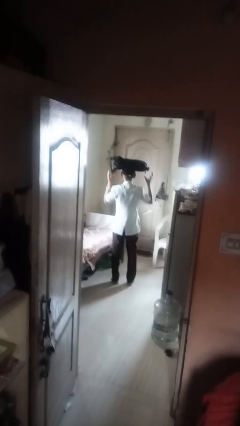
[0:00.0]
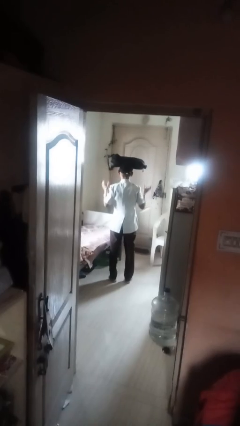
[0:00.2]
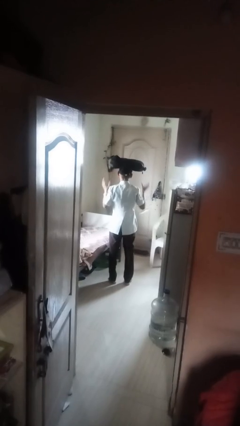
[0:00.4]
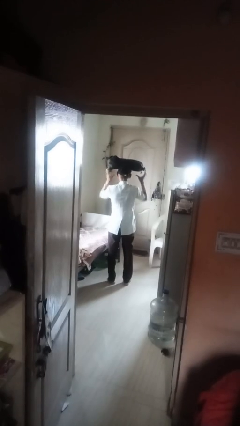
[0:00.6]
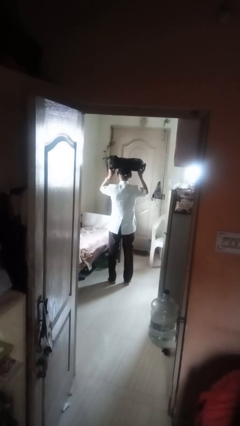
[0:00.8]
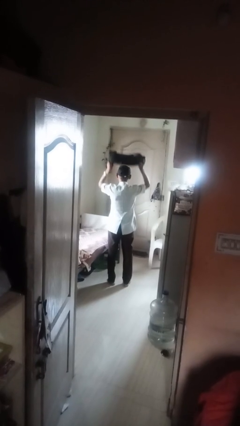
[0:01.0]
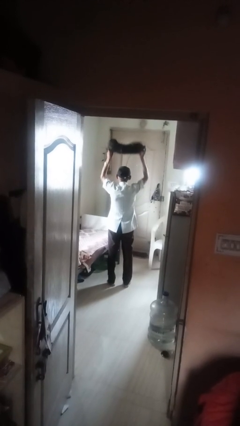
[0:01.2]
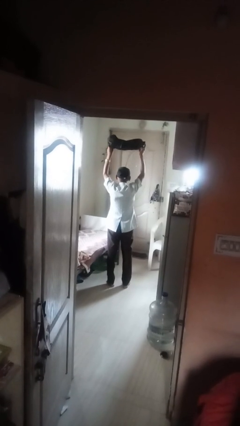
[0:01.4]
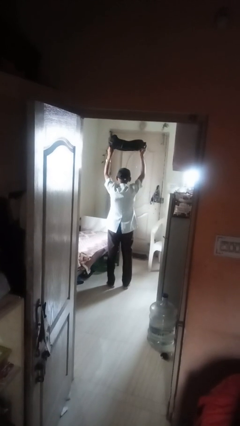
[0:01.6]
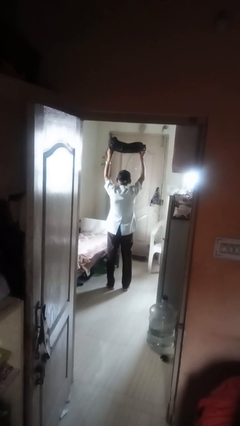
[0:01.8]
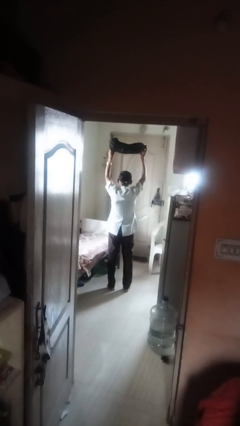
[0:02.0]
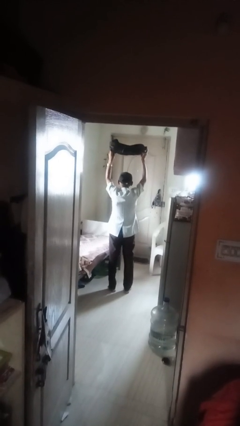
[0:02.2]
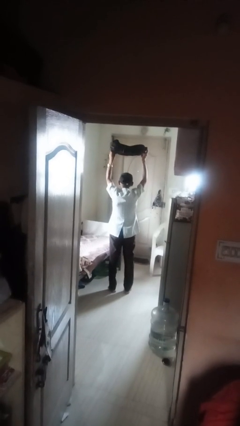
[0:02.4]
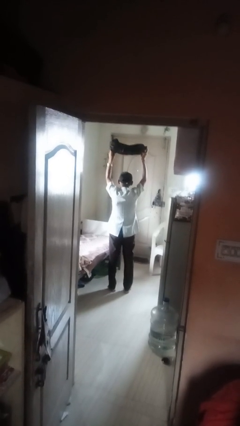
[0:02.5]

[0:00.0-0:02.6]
person holds object above head

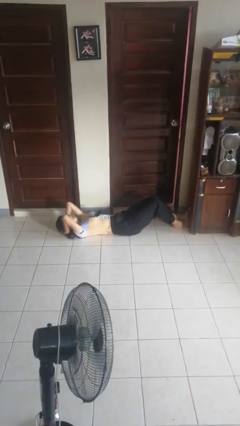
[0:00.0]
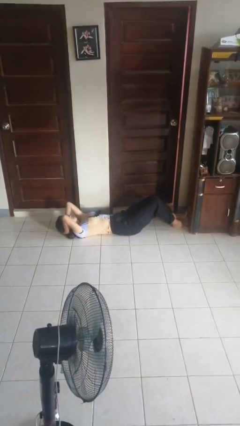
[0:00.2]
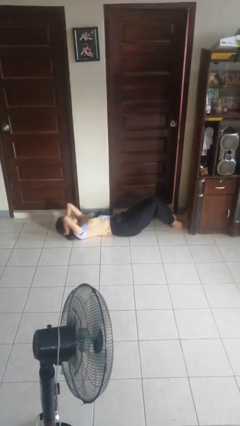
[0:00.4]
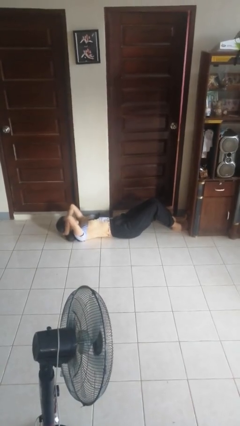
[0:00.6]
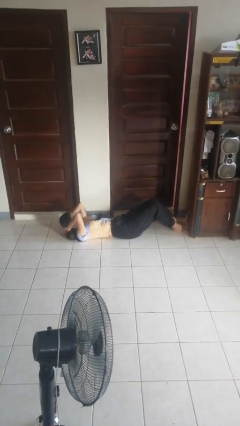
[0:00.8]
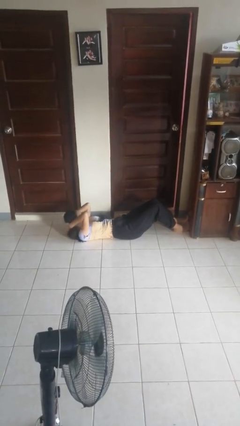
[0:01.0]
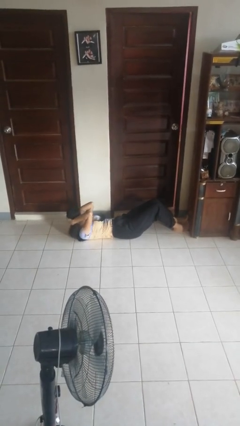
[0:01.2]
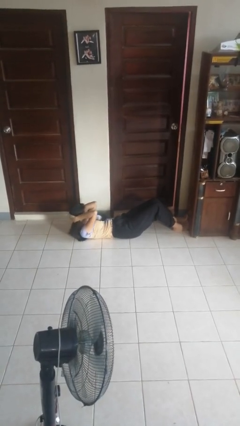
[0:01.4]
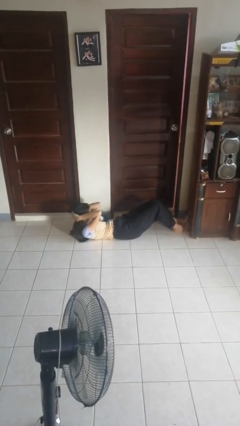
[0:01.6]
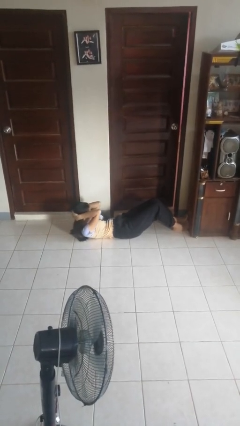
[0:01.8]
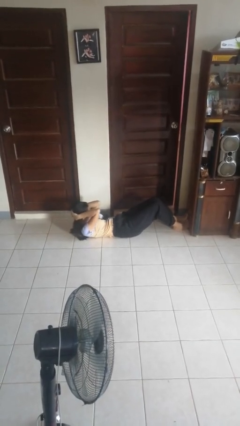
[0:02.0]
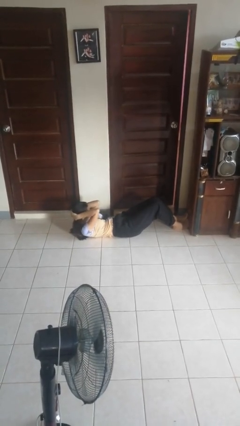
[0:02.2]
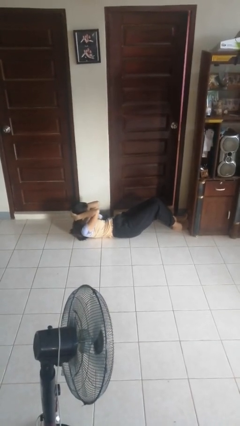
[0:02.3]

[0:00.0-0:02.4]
person exercises with situp

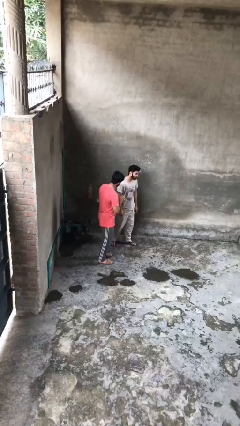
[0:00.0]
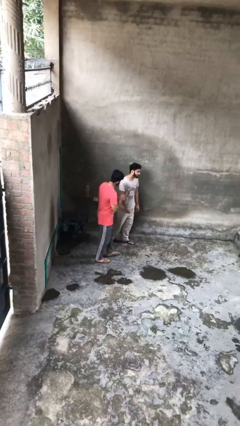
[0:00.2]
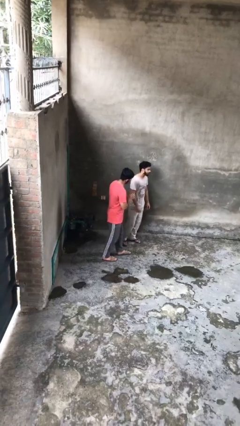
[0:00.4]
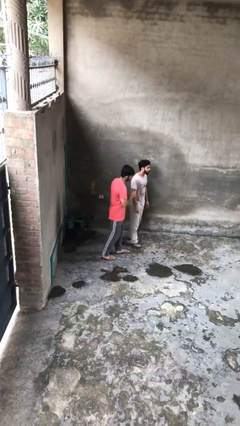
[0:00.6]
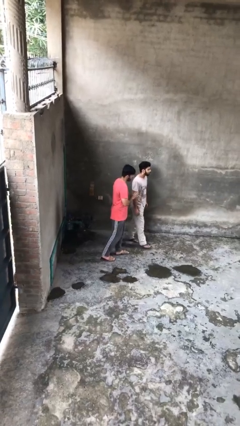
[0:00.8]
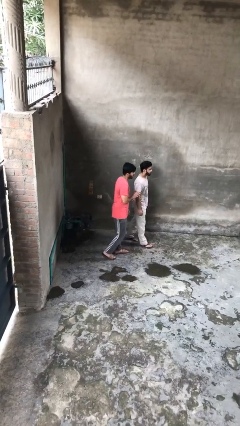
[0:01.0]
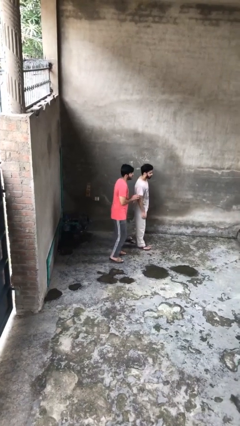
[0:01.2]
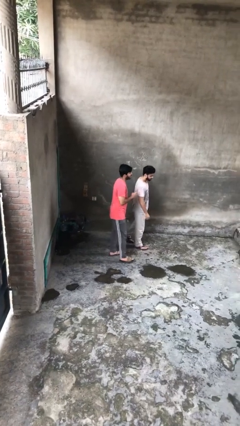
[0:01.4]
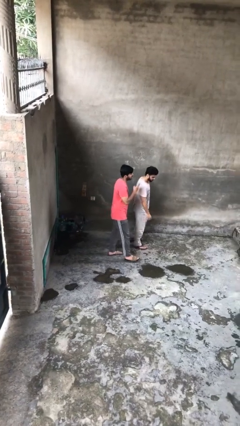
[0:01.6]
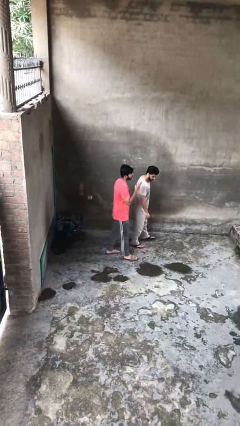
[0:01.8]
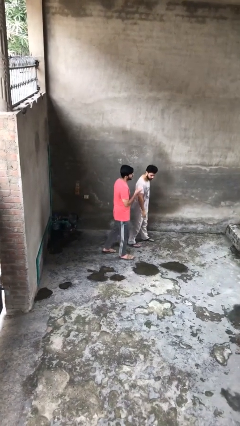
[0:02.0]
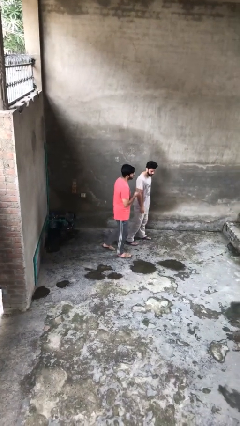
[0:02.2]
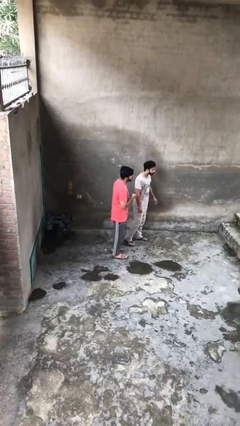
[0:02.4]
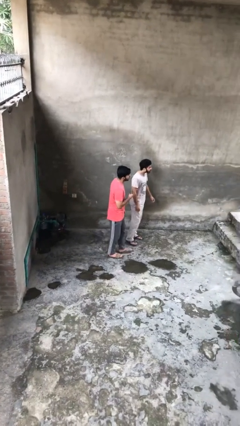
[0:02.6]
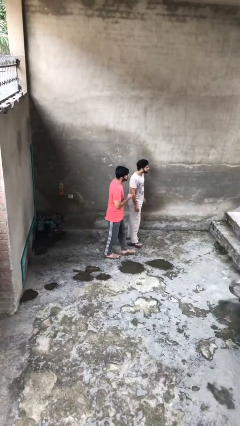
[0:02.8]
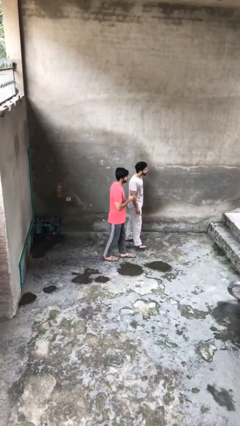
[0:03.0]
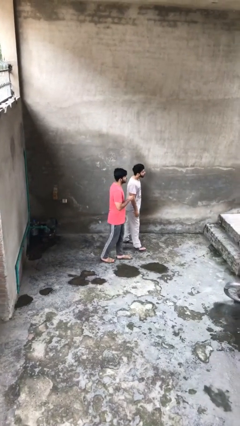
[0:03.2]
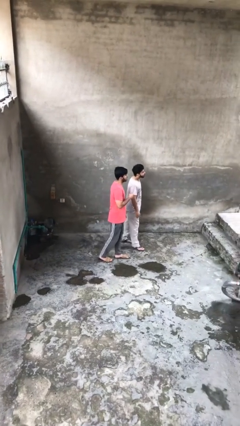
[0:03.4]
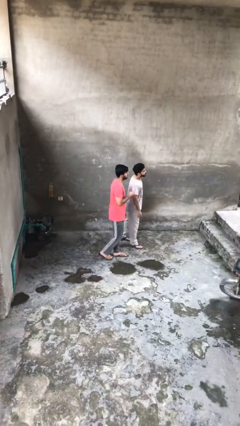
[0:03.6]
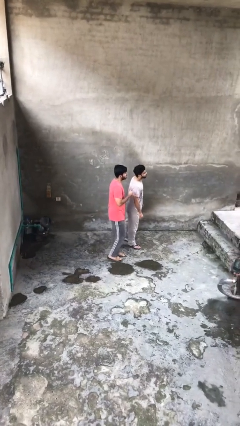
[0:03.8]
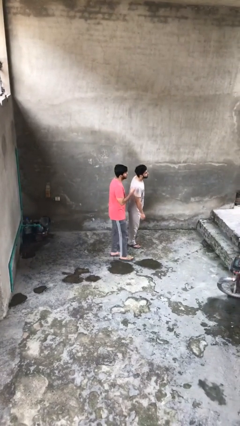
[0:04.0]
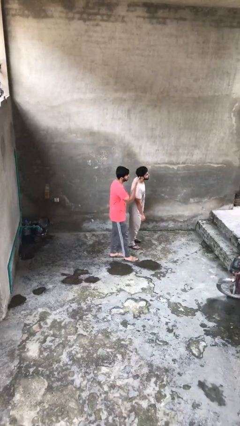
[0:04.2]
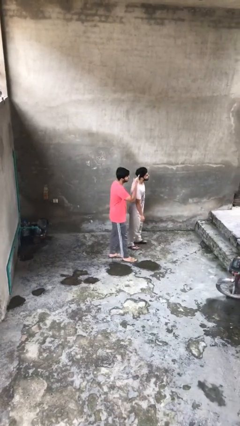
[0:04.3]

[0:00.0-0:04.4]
person talks to person

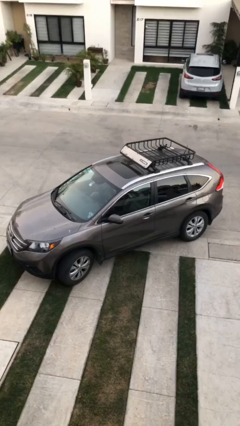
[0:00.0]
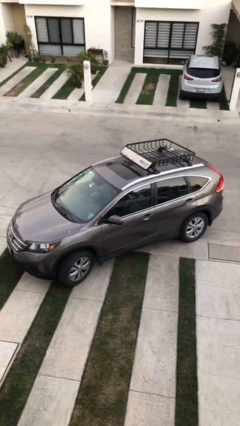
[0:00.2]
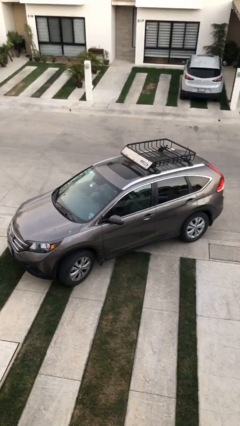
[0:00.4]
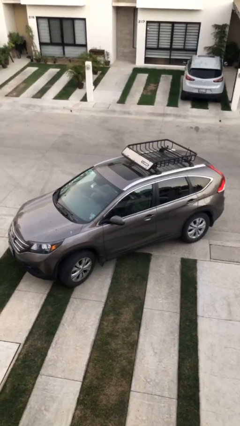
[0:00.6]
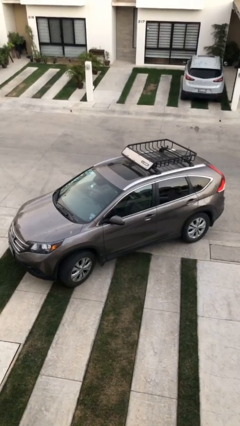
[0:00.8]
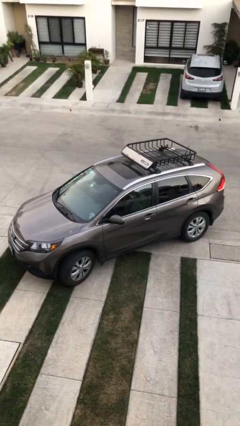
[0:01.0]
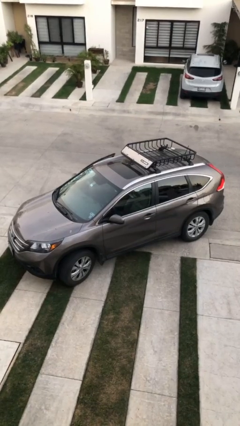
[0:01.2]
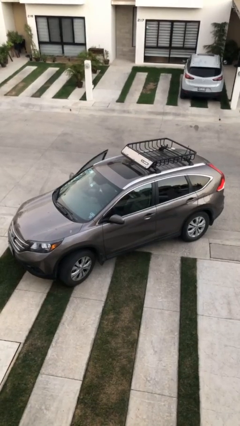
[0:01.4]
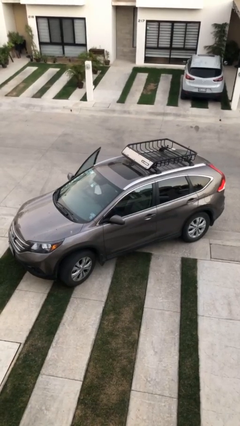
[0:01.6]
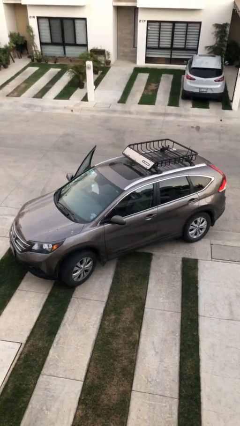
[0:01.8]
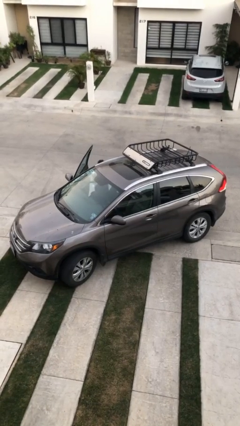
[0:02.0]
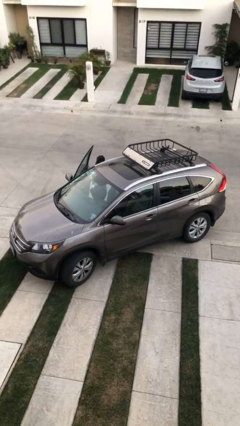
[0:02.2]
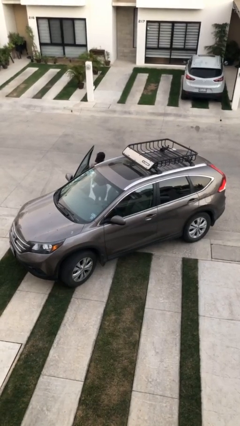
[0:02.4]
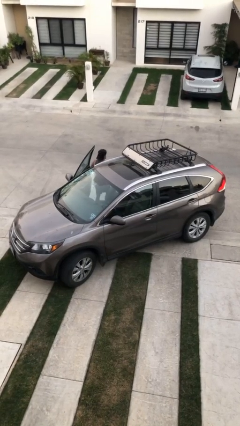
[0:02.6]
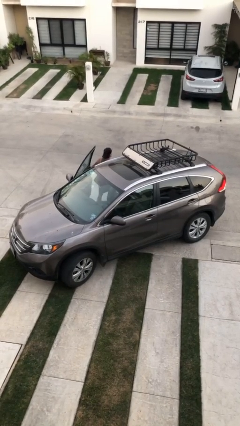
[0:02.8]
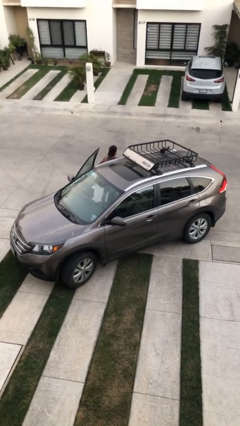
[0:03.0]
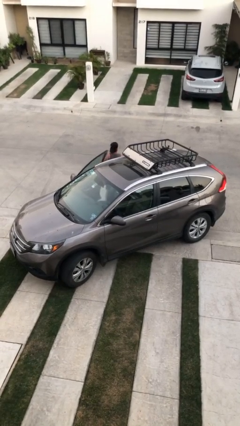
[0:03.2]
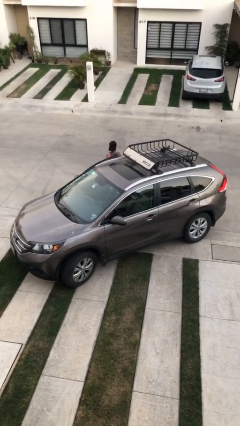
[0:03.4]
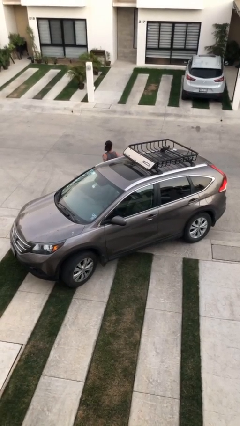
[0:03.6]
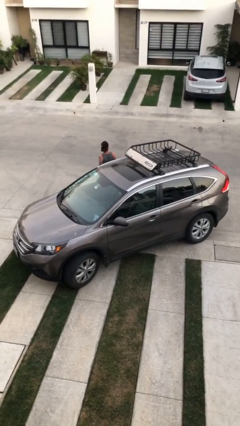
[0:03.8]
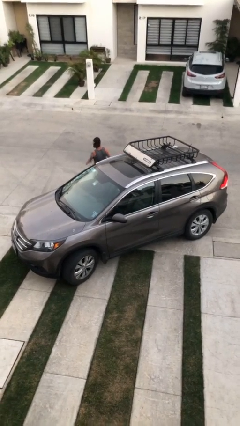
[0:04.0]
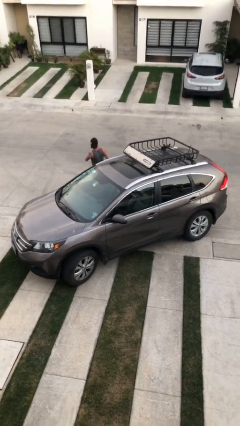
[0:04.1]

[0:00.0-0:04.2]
car drops off person

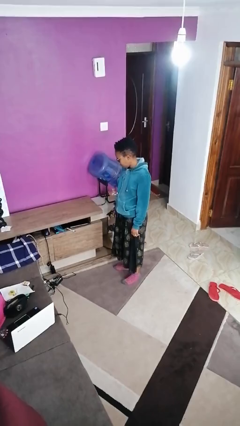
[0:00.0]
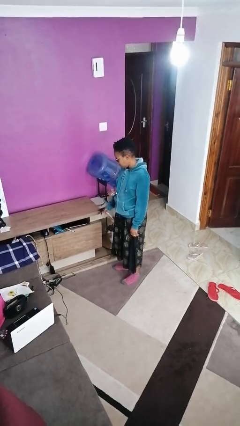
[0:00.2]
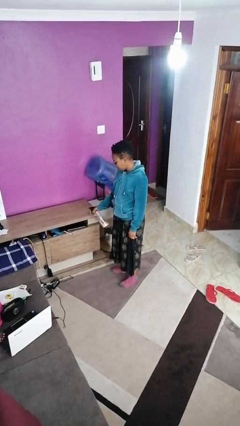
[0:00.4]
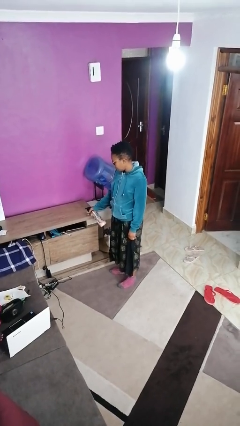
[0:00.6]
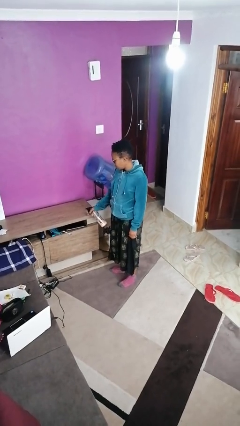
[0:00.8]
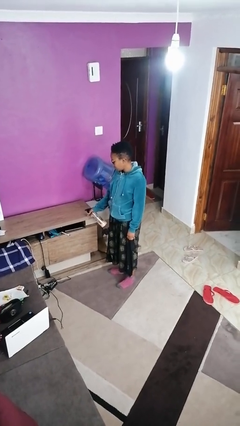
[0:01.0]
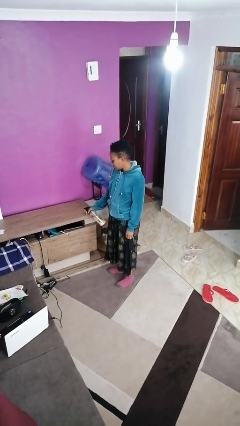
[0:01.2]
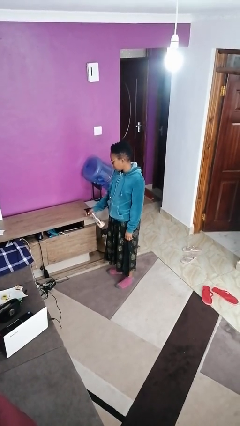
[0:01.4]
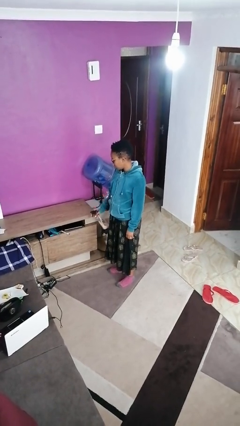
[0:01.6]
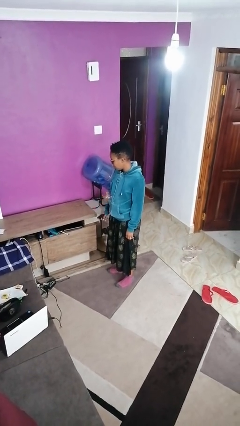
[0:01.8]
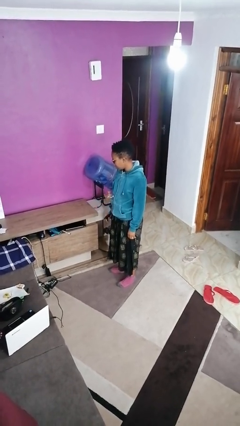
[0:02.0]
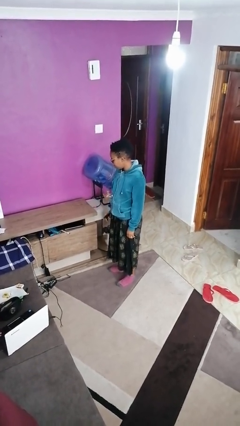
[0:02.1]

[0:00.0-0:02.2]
person sprays from bottle

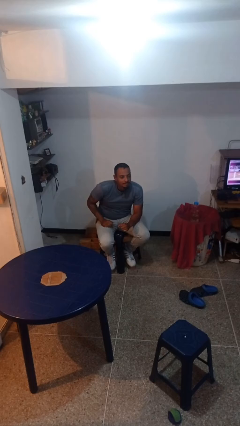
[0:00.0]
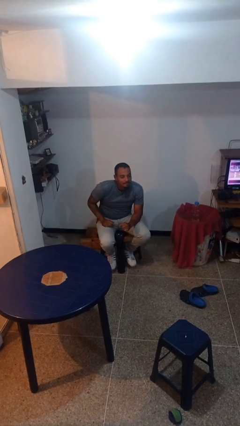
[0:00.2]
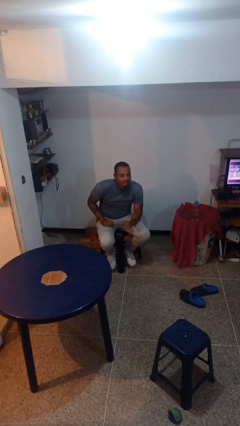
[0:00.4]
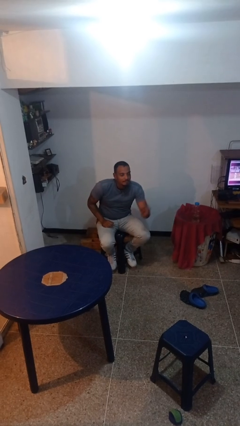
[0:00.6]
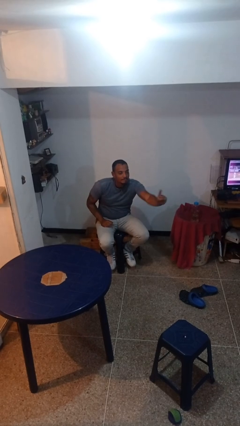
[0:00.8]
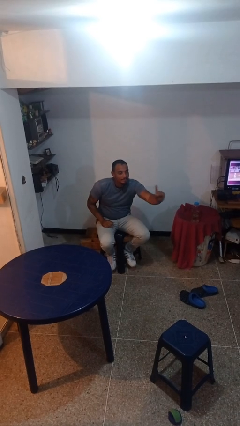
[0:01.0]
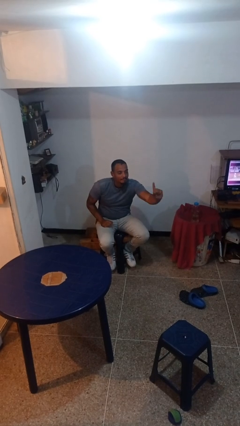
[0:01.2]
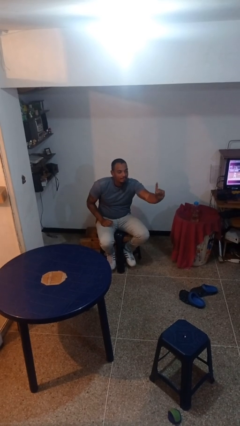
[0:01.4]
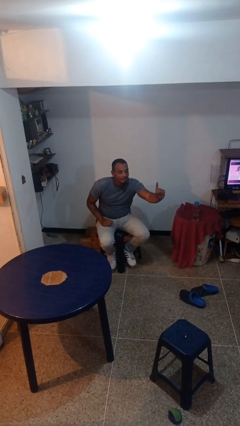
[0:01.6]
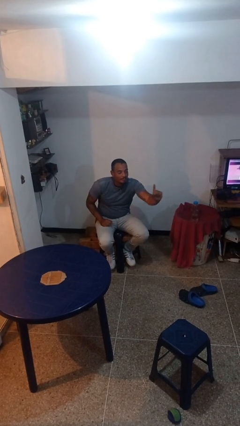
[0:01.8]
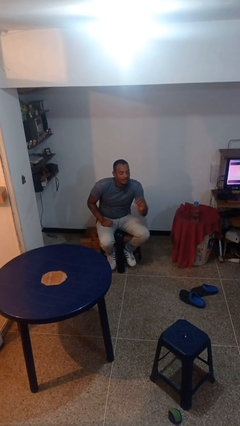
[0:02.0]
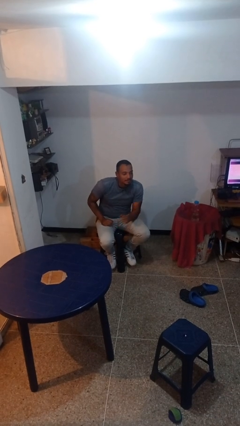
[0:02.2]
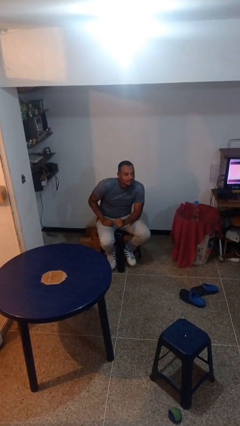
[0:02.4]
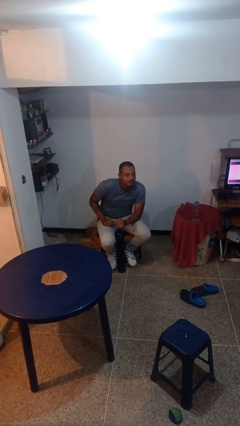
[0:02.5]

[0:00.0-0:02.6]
person gestures number one
